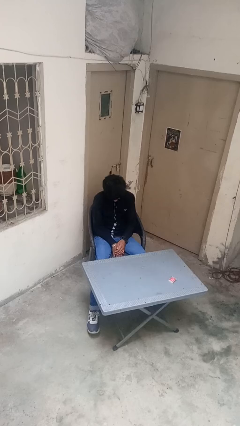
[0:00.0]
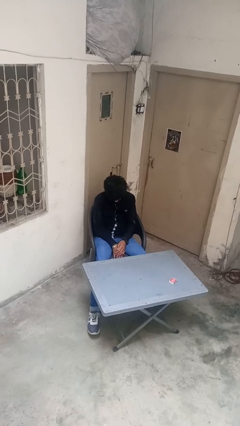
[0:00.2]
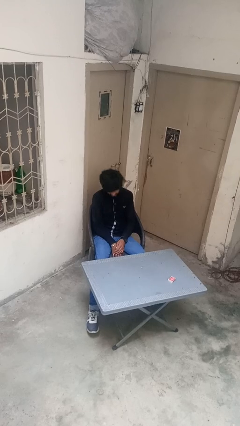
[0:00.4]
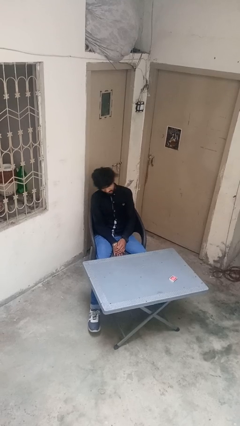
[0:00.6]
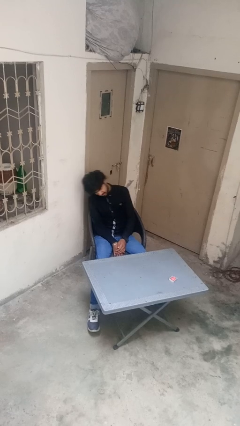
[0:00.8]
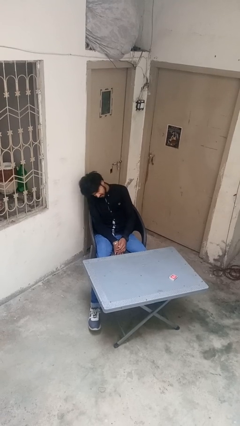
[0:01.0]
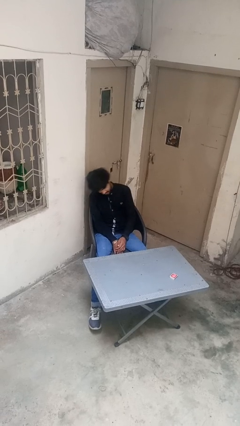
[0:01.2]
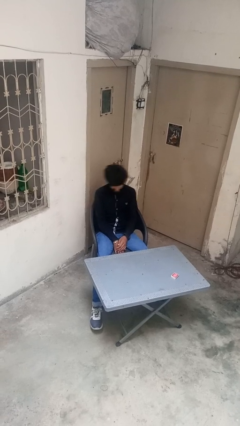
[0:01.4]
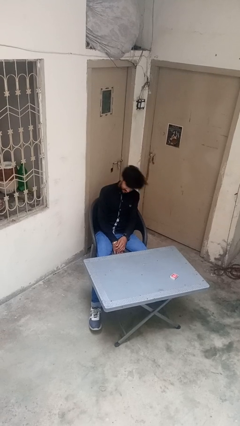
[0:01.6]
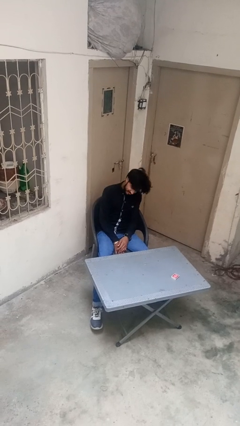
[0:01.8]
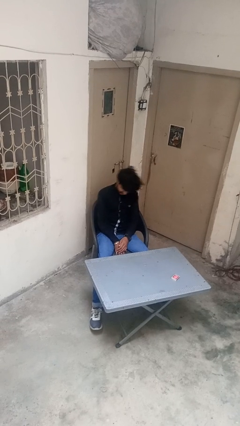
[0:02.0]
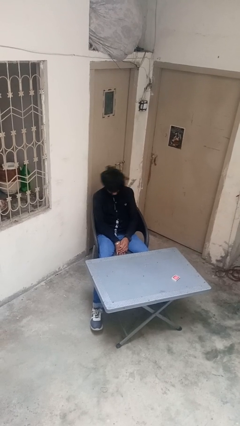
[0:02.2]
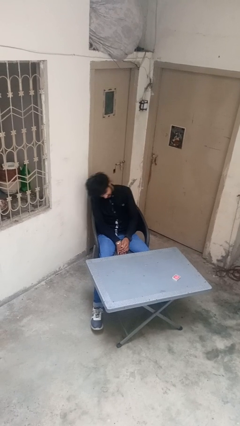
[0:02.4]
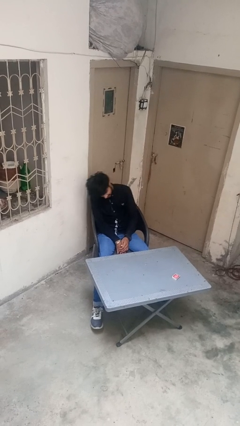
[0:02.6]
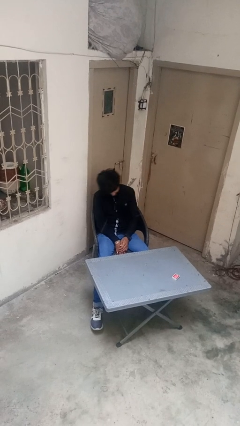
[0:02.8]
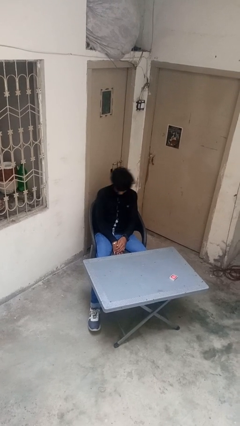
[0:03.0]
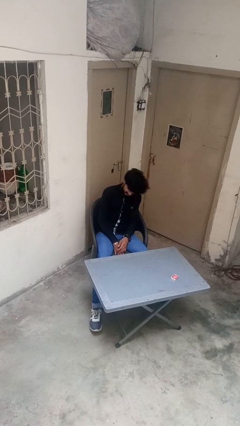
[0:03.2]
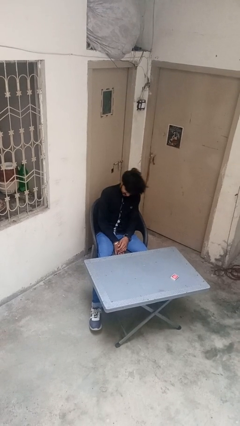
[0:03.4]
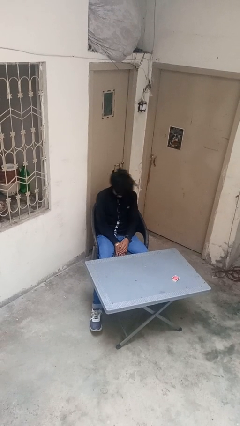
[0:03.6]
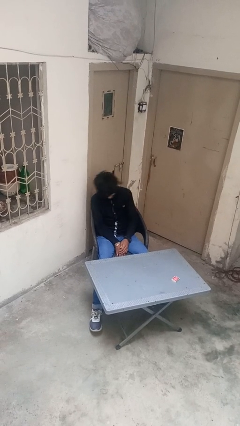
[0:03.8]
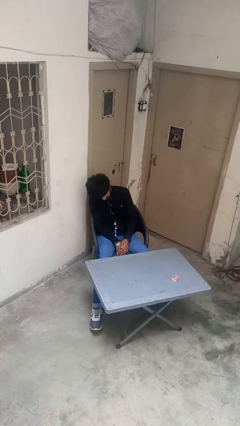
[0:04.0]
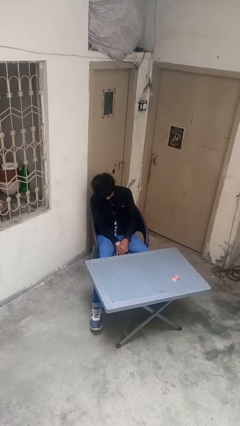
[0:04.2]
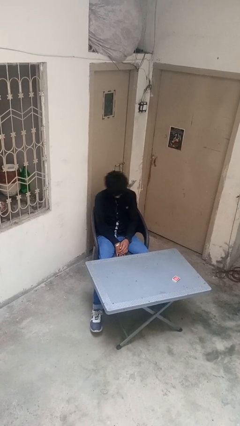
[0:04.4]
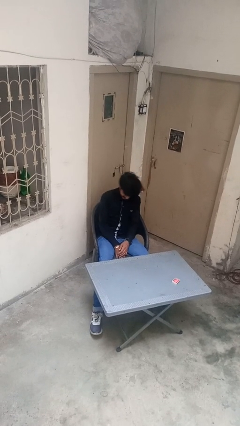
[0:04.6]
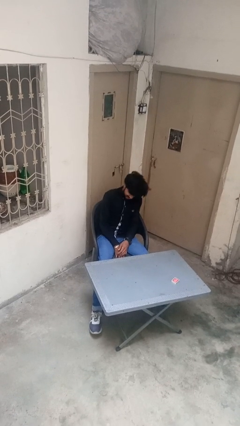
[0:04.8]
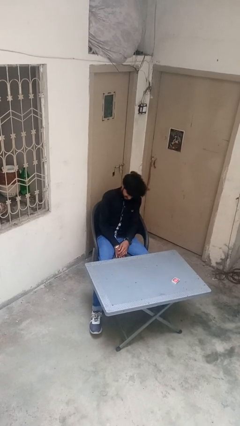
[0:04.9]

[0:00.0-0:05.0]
person shakes head

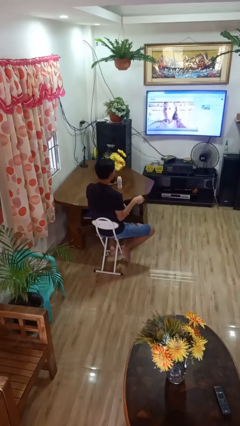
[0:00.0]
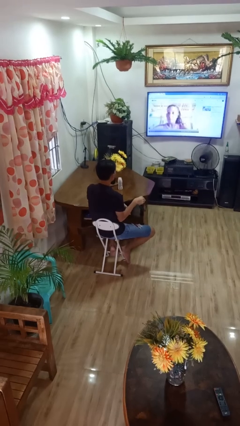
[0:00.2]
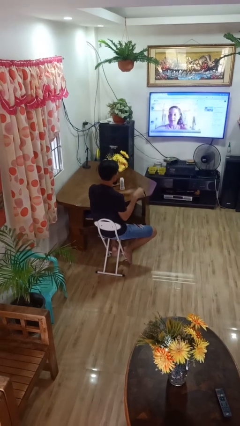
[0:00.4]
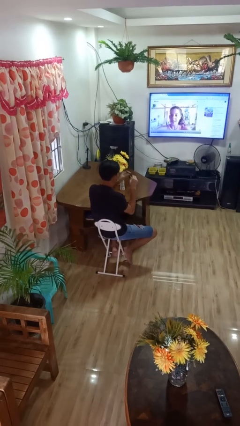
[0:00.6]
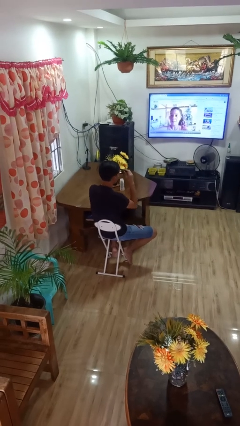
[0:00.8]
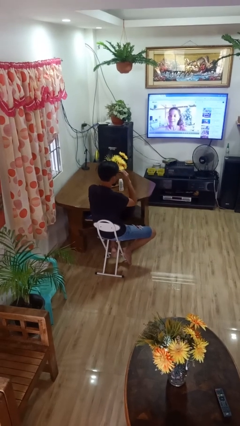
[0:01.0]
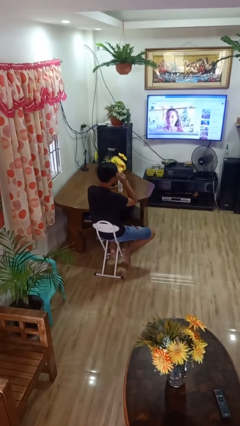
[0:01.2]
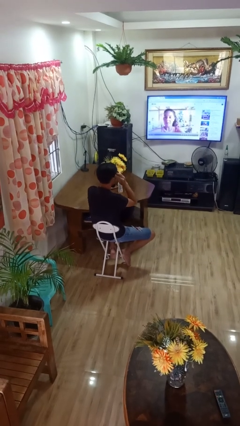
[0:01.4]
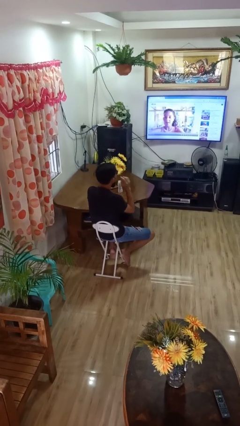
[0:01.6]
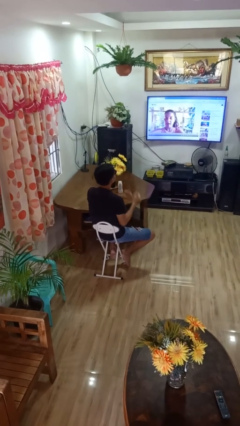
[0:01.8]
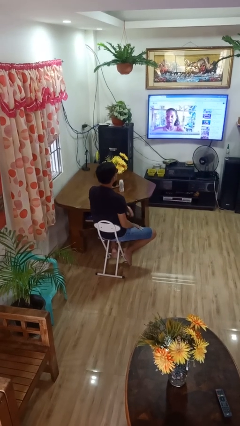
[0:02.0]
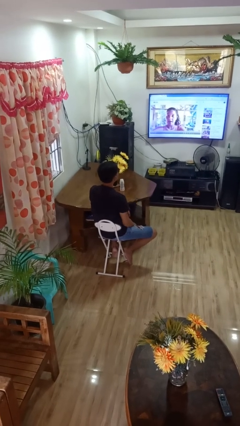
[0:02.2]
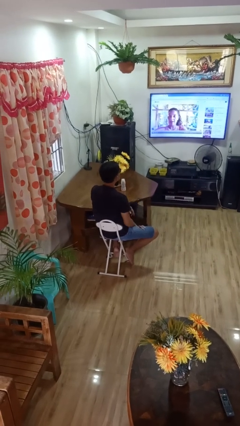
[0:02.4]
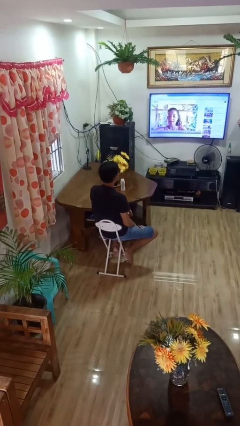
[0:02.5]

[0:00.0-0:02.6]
person puts on sunglasses

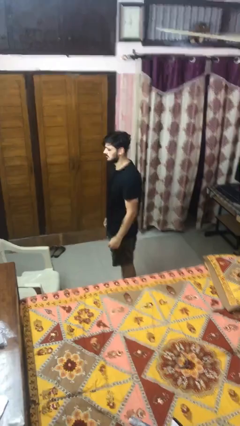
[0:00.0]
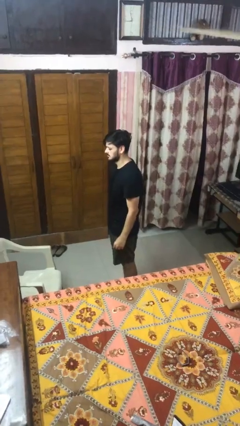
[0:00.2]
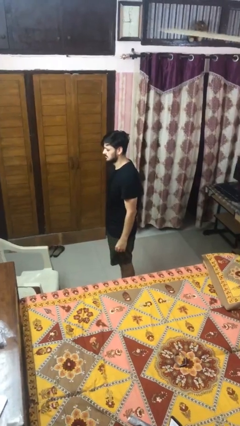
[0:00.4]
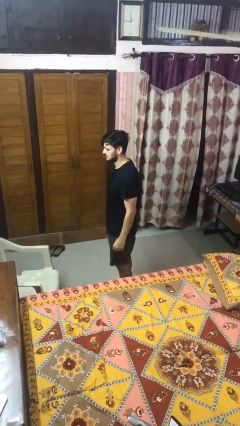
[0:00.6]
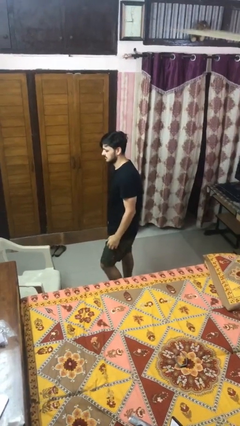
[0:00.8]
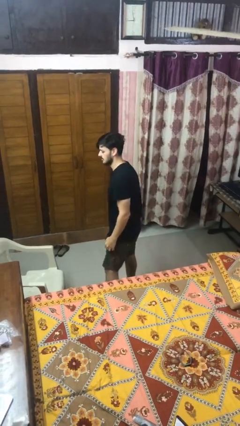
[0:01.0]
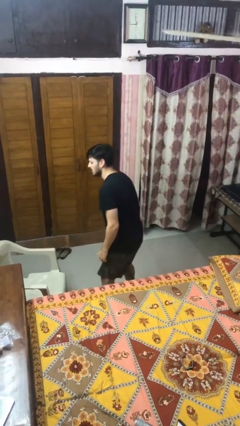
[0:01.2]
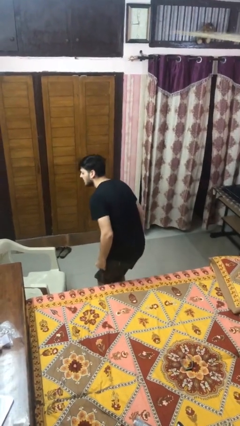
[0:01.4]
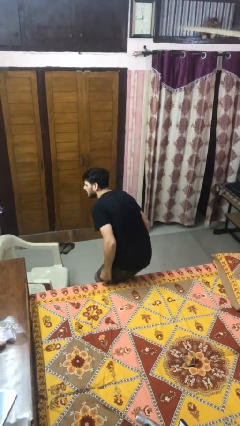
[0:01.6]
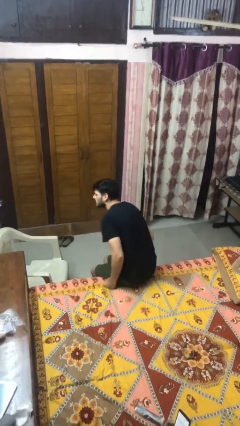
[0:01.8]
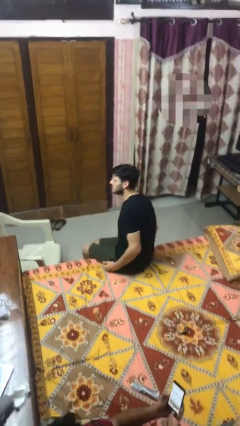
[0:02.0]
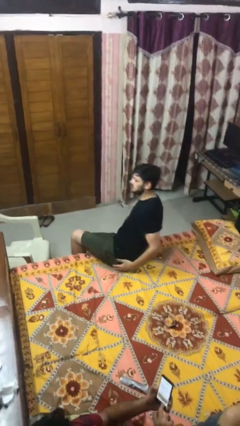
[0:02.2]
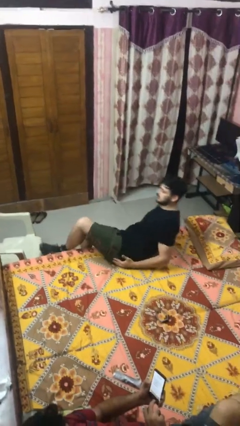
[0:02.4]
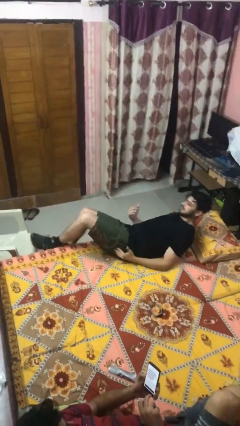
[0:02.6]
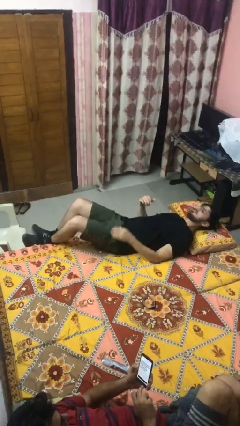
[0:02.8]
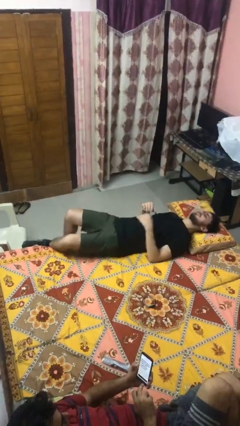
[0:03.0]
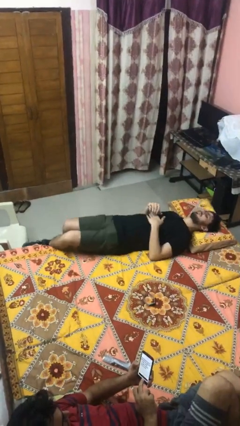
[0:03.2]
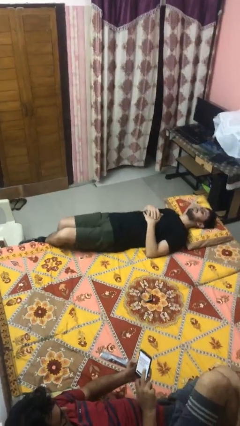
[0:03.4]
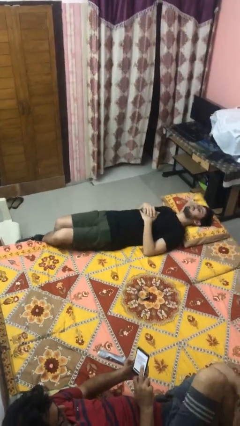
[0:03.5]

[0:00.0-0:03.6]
person lies down on bed

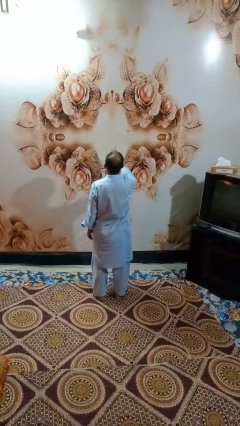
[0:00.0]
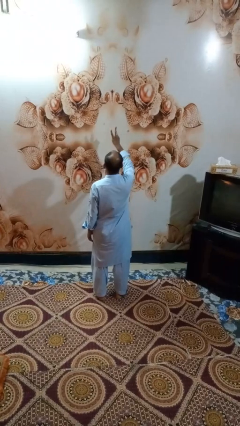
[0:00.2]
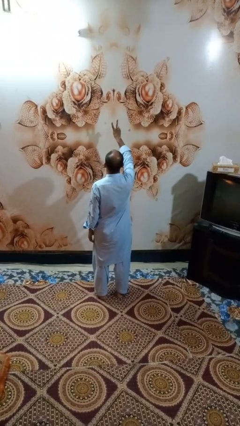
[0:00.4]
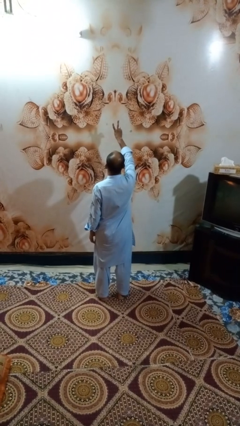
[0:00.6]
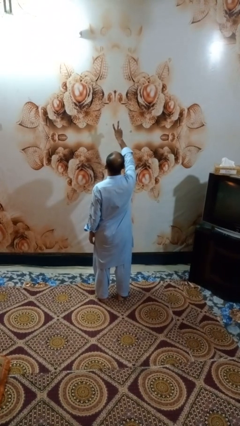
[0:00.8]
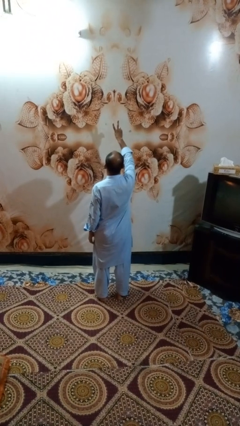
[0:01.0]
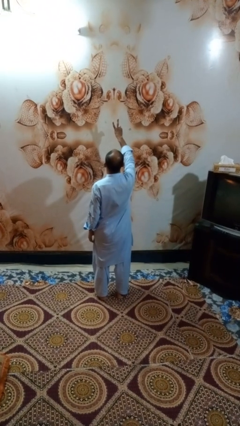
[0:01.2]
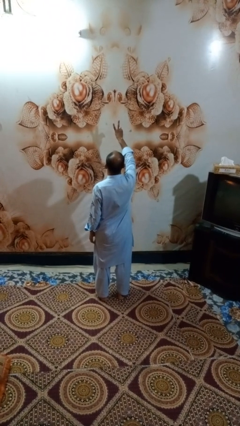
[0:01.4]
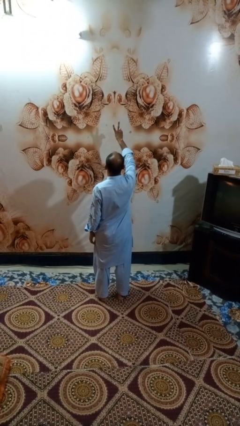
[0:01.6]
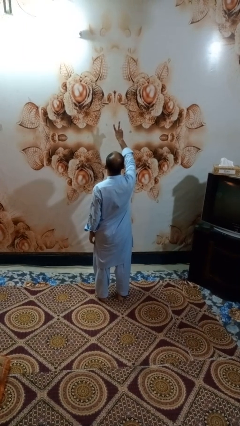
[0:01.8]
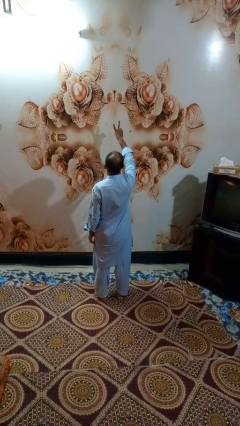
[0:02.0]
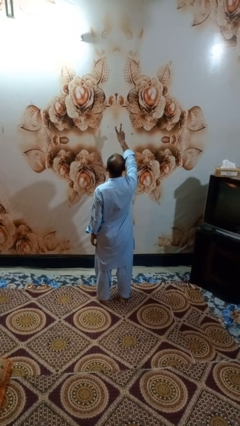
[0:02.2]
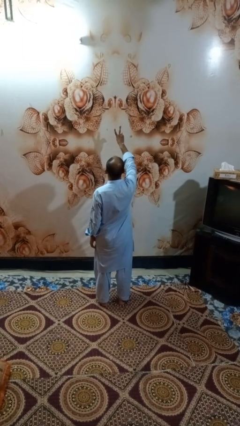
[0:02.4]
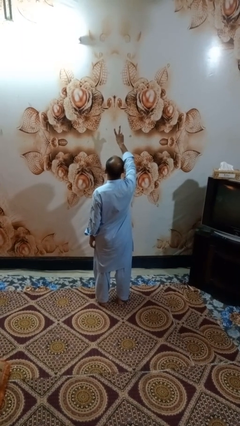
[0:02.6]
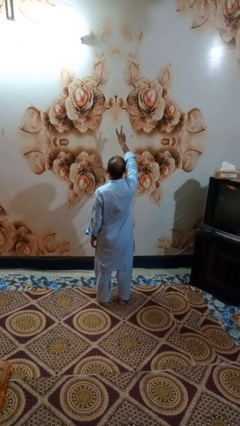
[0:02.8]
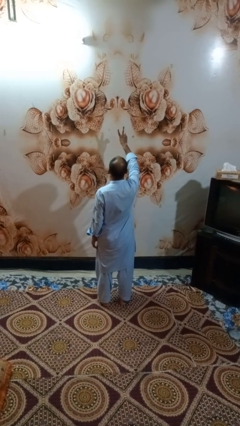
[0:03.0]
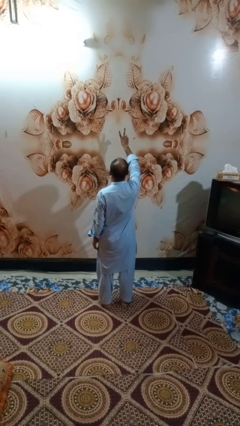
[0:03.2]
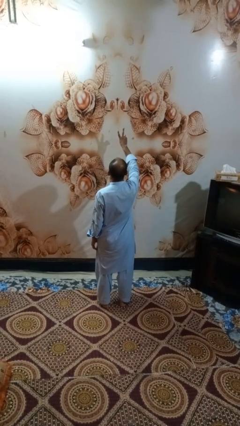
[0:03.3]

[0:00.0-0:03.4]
person gestures peace

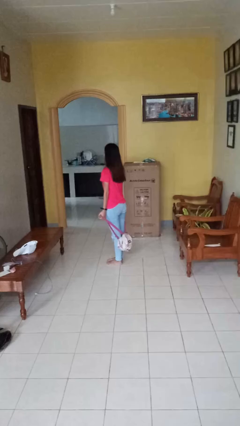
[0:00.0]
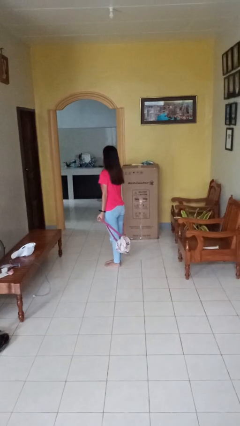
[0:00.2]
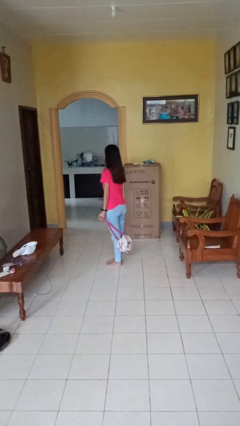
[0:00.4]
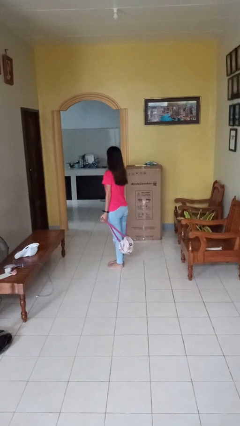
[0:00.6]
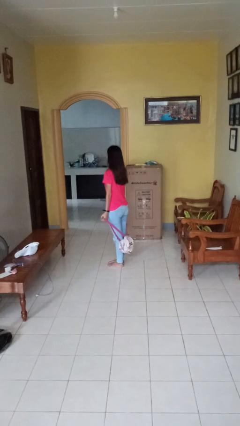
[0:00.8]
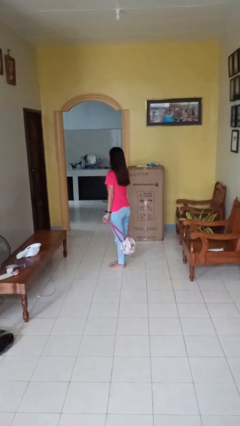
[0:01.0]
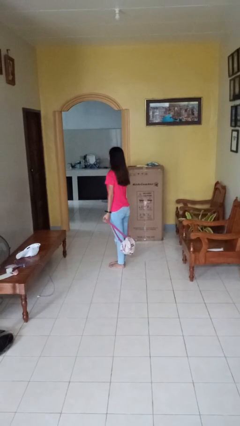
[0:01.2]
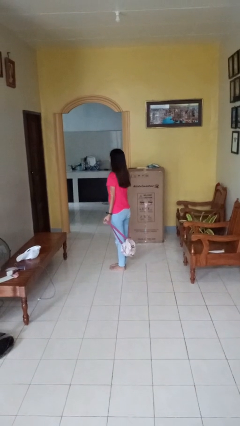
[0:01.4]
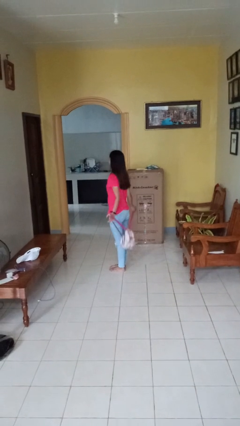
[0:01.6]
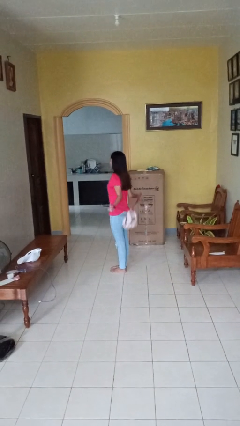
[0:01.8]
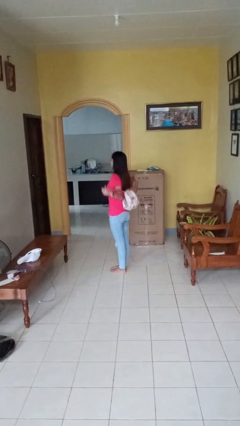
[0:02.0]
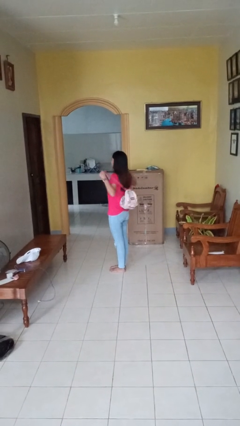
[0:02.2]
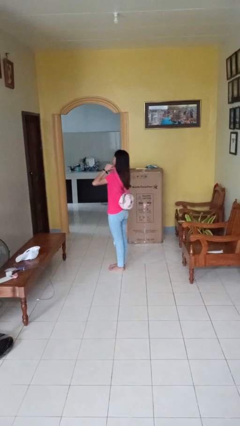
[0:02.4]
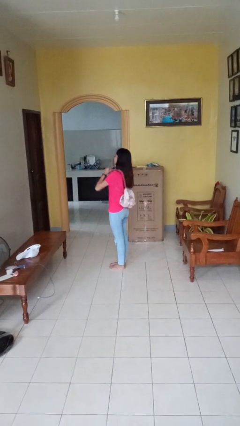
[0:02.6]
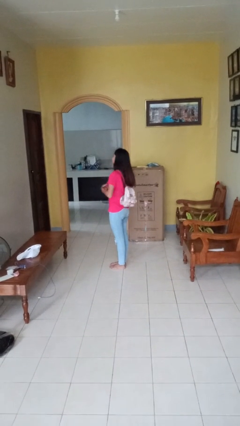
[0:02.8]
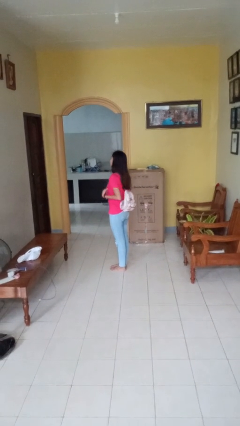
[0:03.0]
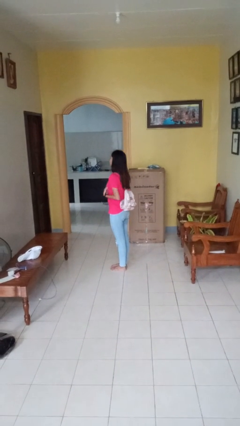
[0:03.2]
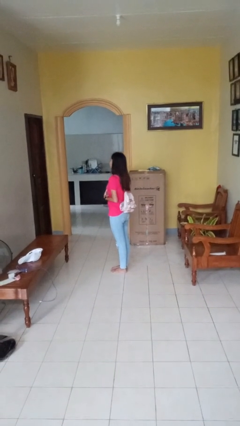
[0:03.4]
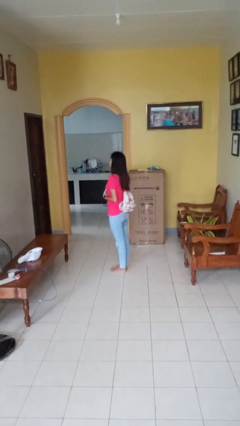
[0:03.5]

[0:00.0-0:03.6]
person puts on backpack
